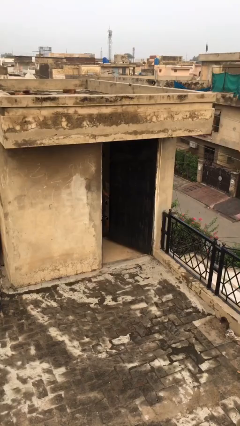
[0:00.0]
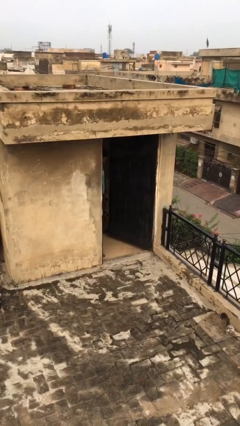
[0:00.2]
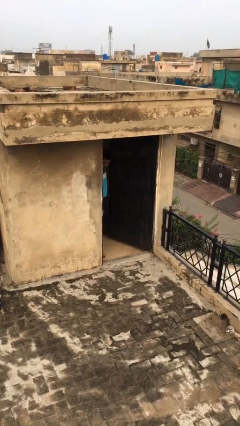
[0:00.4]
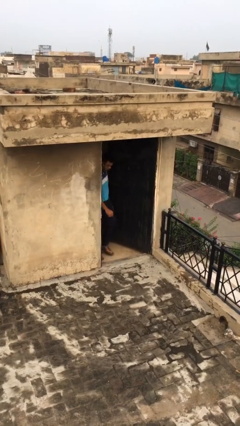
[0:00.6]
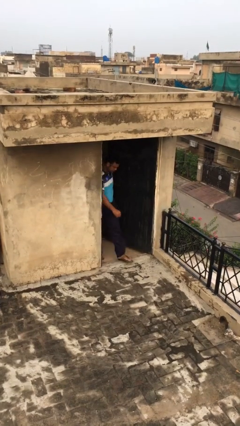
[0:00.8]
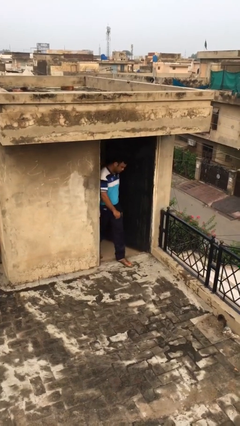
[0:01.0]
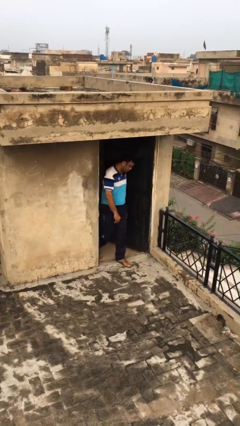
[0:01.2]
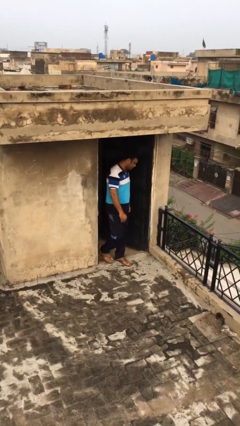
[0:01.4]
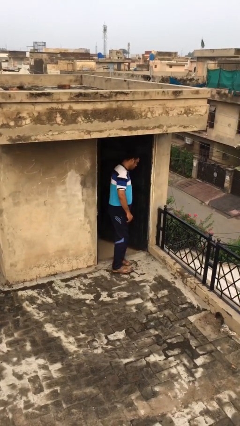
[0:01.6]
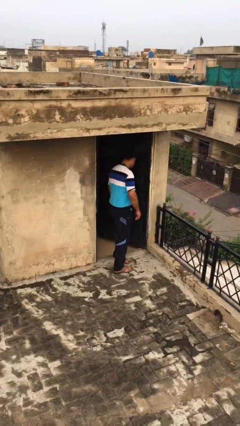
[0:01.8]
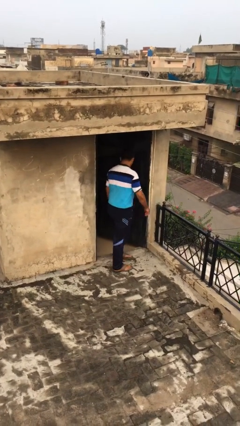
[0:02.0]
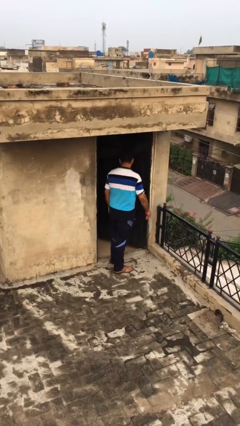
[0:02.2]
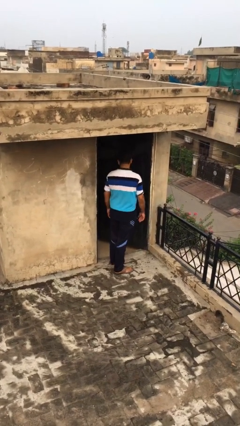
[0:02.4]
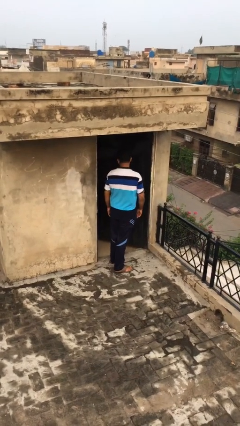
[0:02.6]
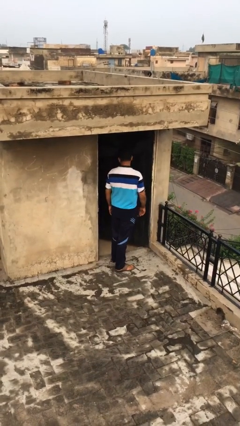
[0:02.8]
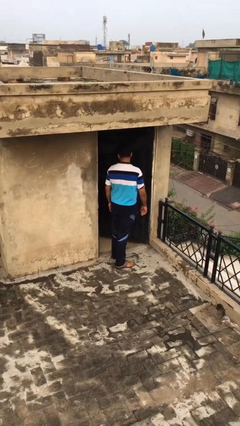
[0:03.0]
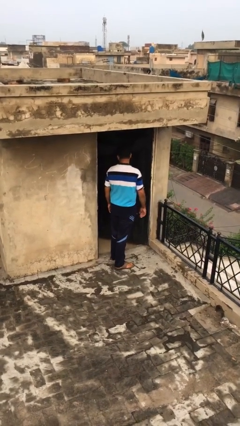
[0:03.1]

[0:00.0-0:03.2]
person enters scene through structure

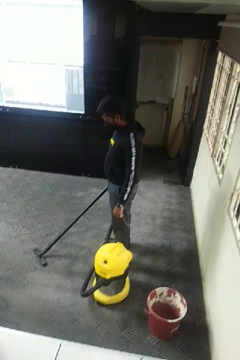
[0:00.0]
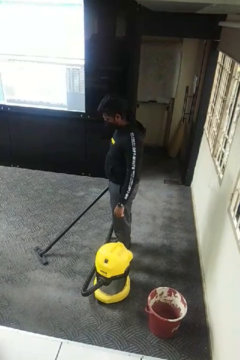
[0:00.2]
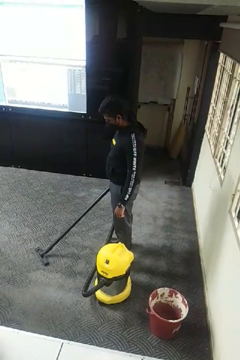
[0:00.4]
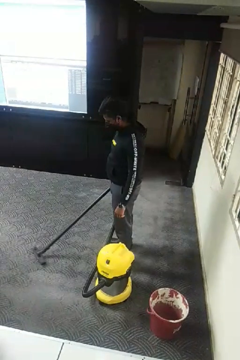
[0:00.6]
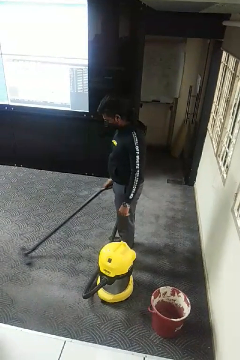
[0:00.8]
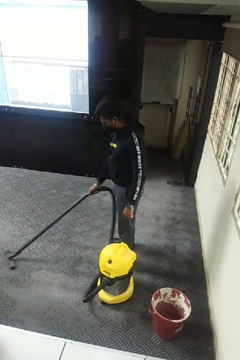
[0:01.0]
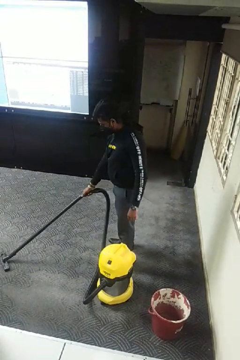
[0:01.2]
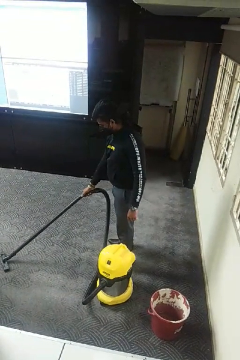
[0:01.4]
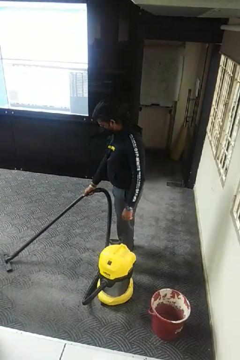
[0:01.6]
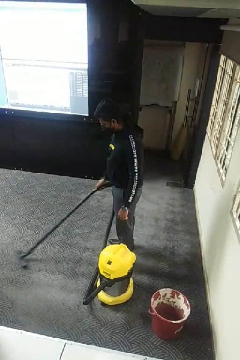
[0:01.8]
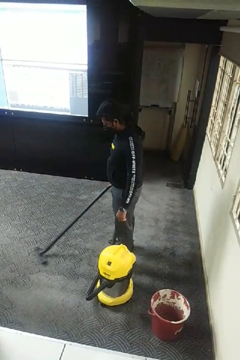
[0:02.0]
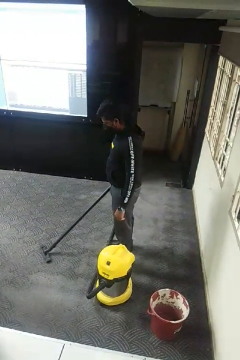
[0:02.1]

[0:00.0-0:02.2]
person vacuums carpet

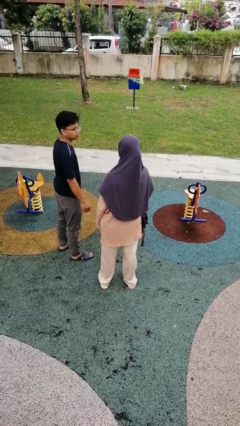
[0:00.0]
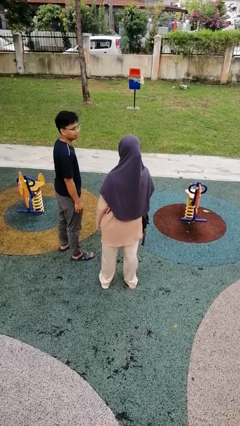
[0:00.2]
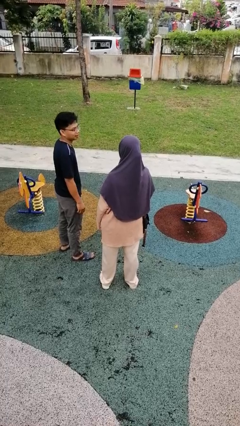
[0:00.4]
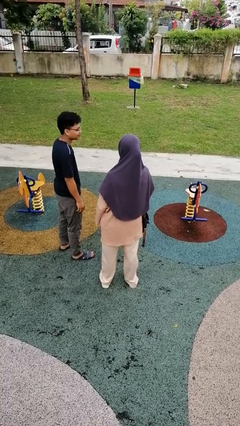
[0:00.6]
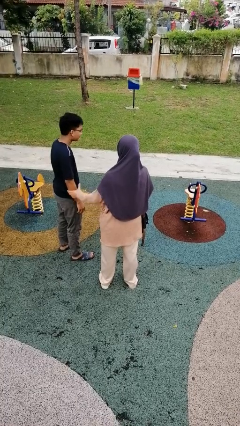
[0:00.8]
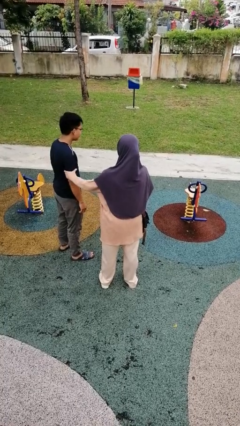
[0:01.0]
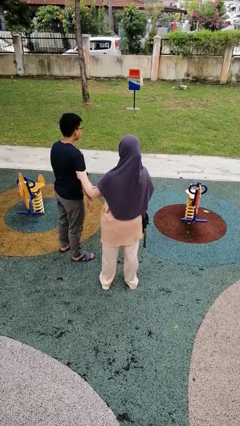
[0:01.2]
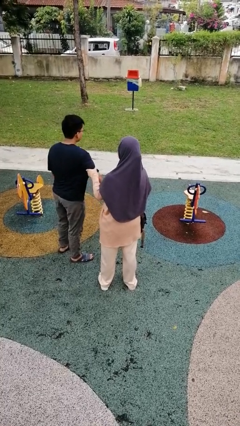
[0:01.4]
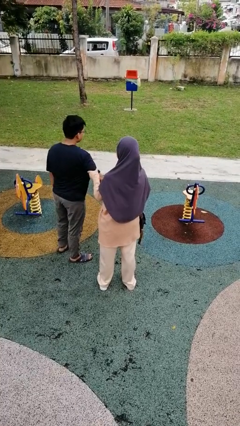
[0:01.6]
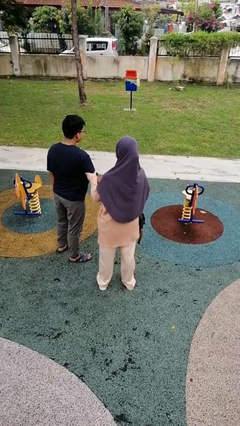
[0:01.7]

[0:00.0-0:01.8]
person grabs person by bicep

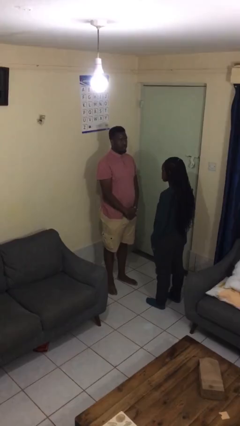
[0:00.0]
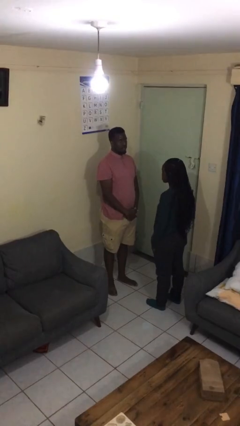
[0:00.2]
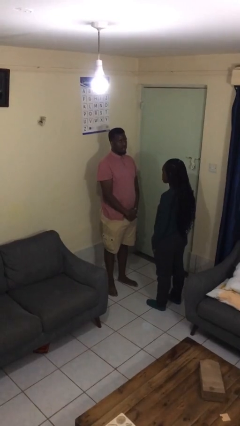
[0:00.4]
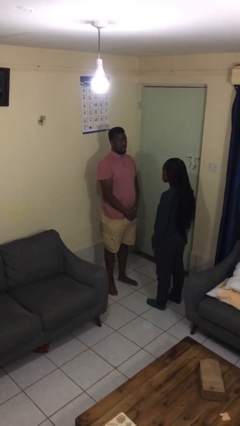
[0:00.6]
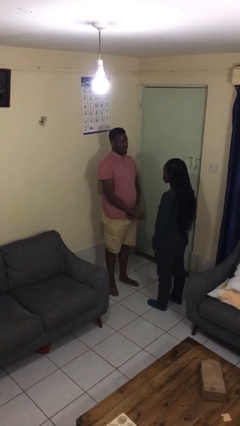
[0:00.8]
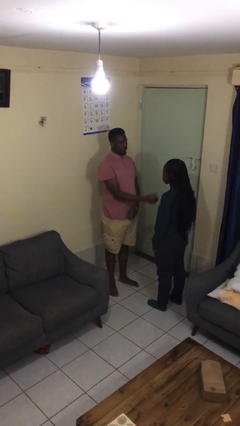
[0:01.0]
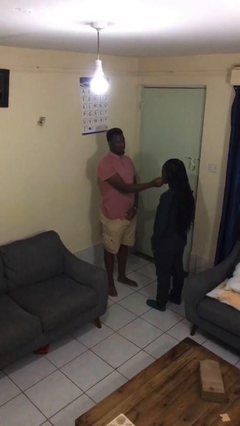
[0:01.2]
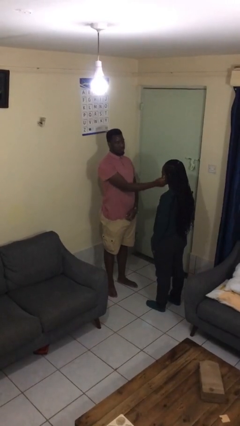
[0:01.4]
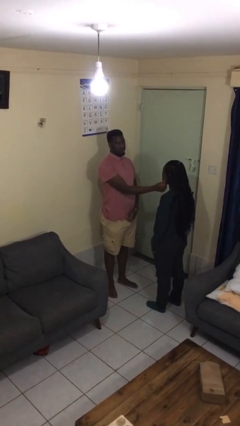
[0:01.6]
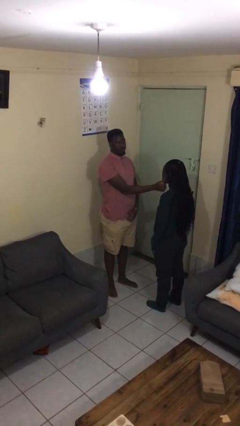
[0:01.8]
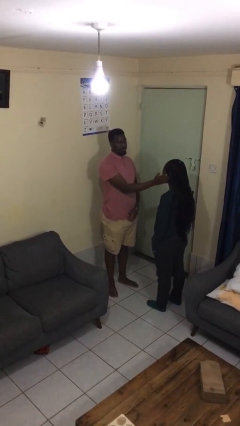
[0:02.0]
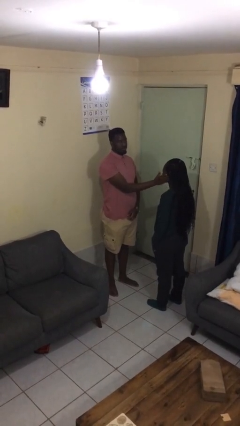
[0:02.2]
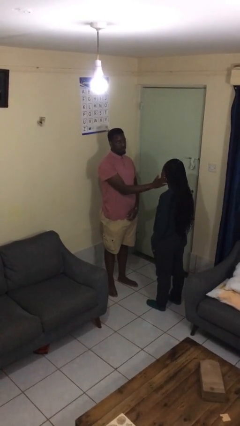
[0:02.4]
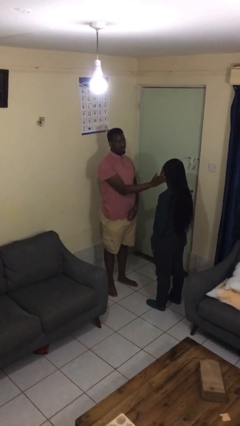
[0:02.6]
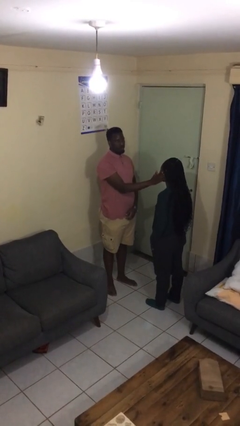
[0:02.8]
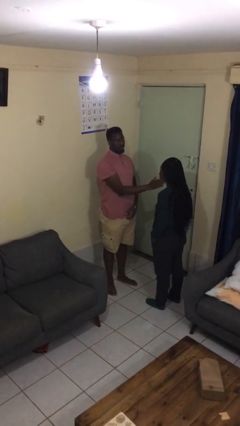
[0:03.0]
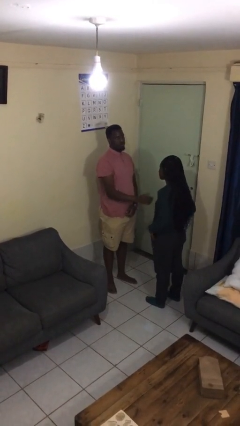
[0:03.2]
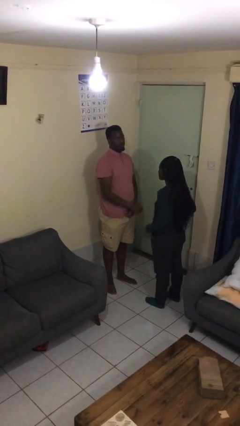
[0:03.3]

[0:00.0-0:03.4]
person touches face of person

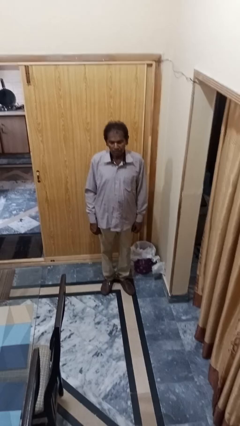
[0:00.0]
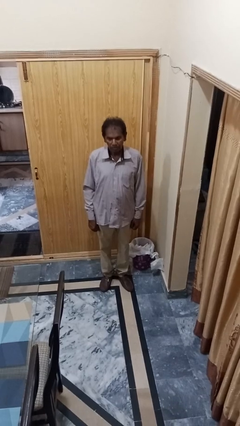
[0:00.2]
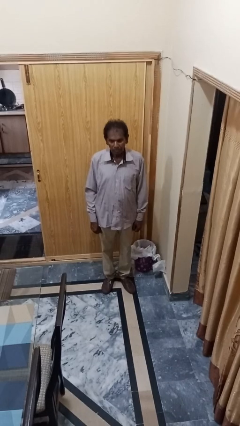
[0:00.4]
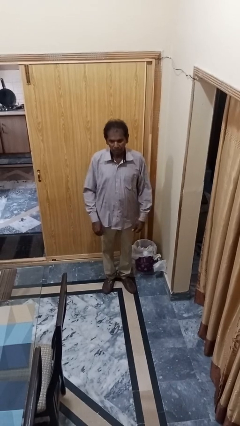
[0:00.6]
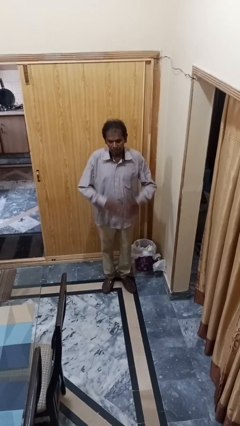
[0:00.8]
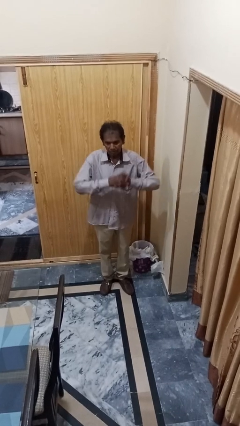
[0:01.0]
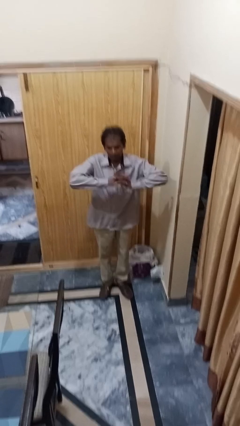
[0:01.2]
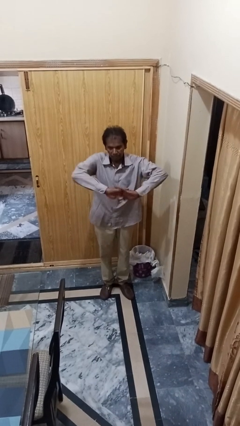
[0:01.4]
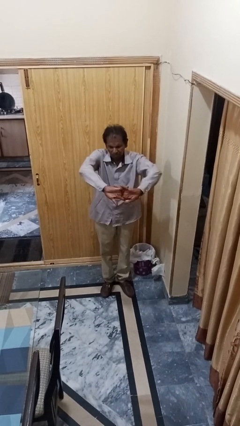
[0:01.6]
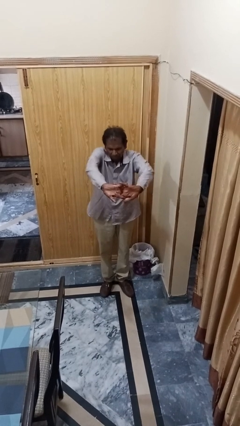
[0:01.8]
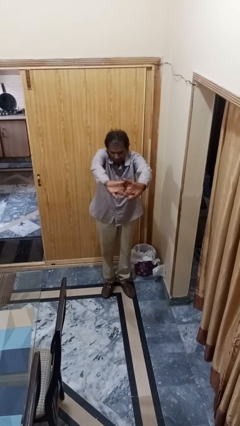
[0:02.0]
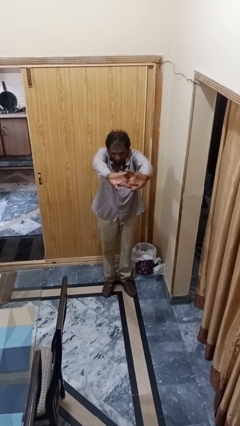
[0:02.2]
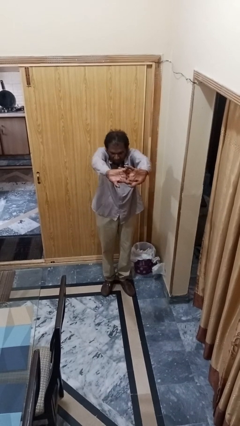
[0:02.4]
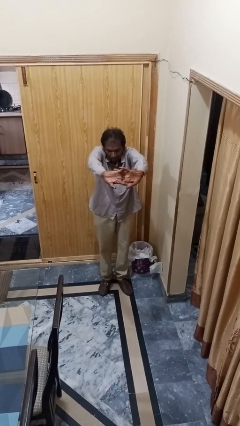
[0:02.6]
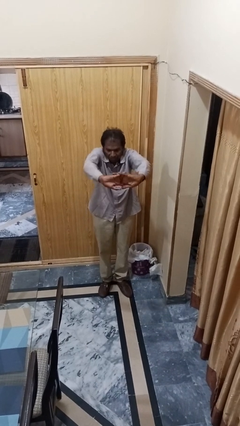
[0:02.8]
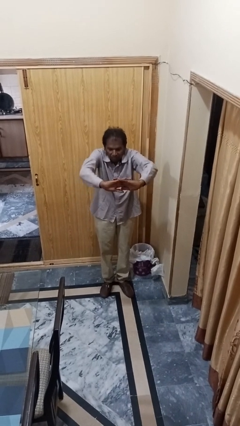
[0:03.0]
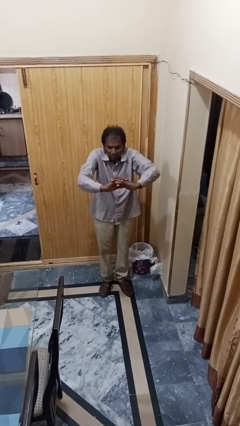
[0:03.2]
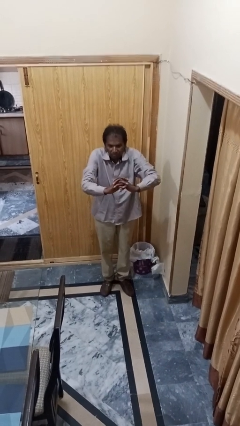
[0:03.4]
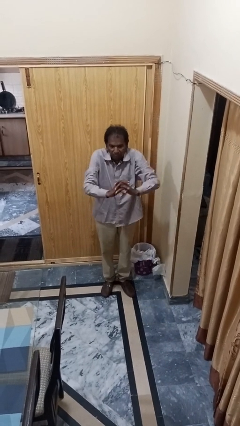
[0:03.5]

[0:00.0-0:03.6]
person cracks knuckles

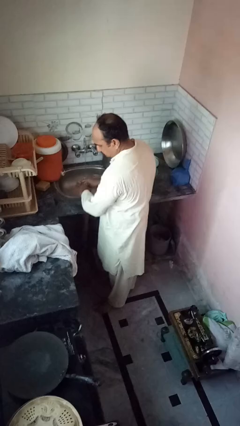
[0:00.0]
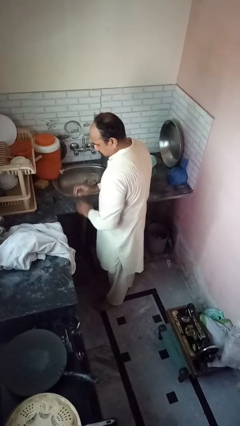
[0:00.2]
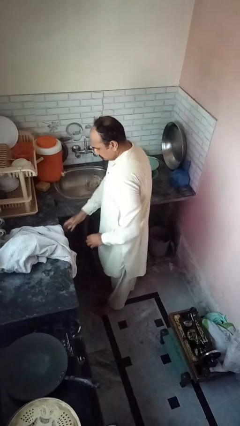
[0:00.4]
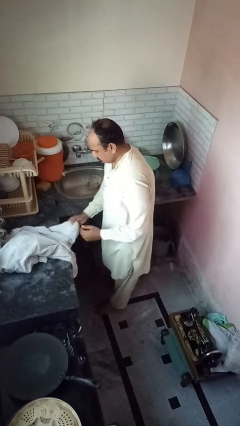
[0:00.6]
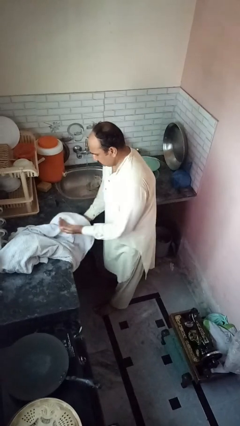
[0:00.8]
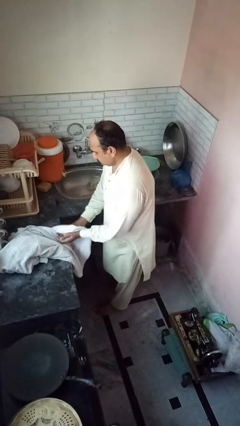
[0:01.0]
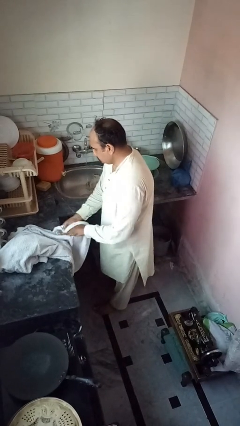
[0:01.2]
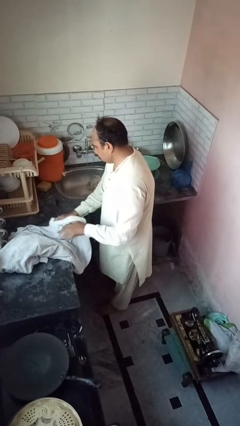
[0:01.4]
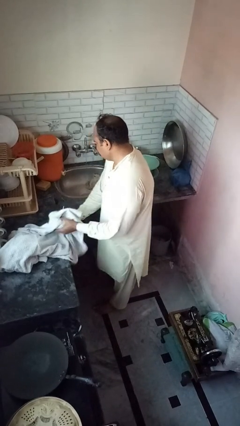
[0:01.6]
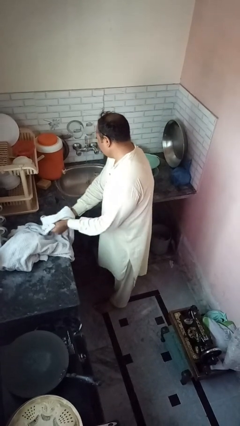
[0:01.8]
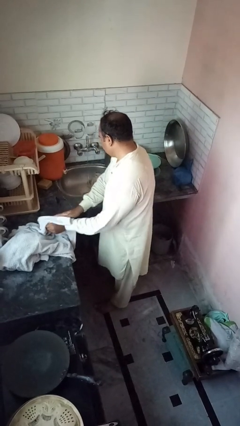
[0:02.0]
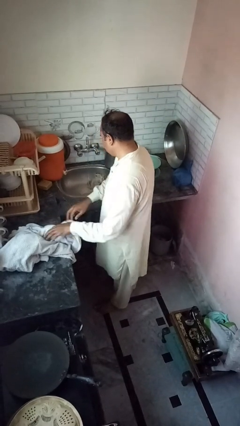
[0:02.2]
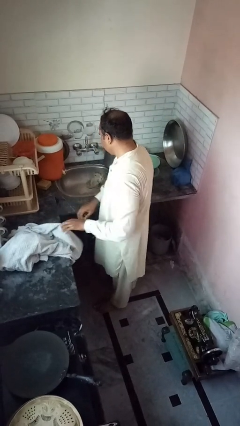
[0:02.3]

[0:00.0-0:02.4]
person dries hands with towel

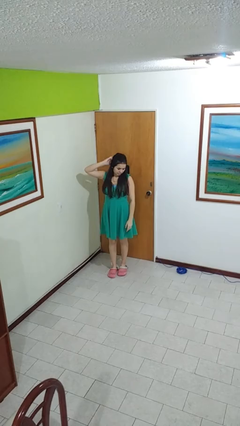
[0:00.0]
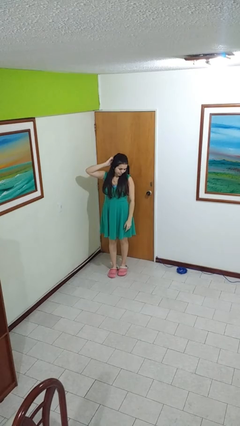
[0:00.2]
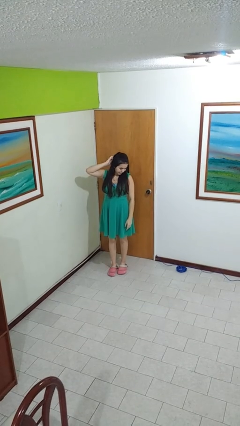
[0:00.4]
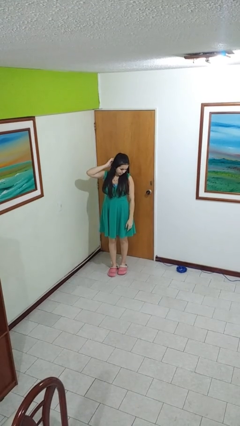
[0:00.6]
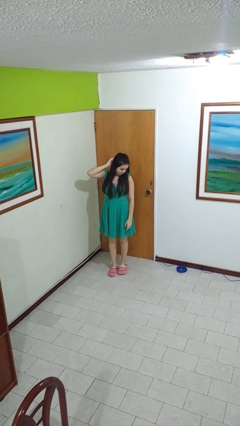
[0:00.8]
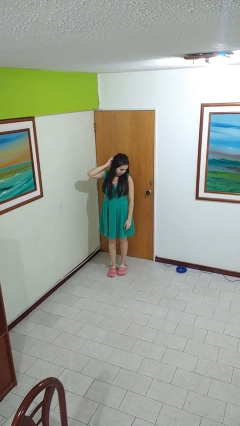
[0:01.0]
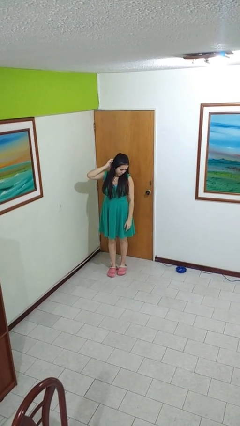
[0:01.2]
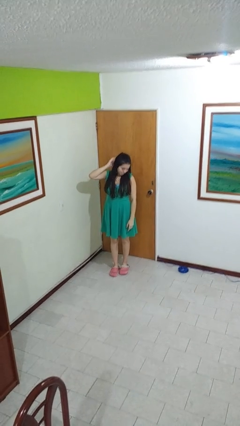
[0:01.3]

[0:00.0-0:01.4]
person scratches face
